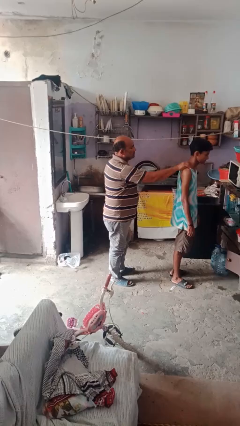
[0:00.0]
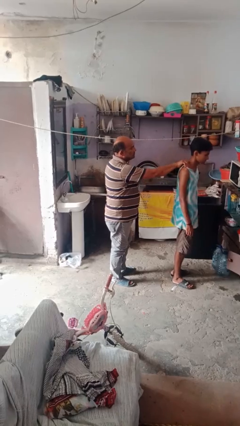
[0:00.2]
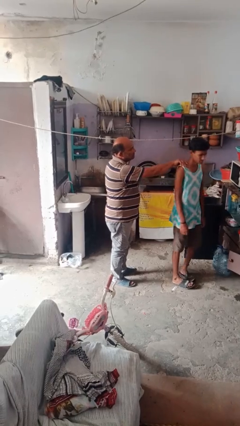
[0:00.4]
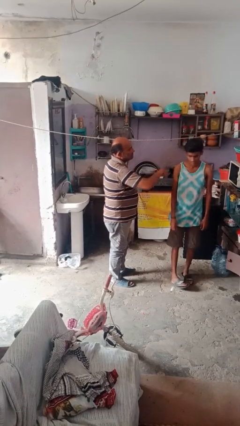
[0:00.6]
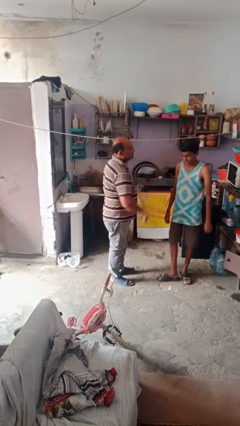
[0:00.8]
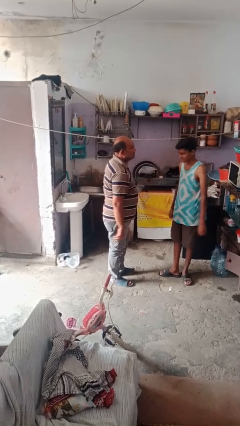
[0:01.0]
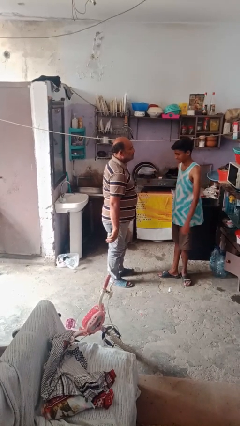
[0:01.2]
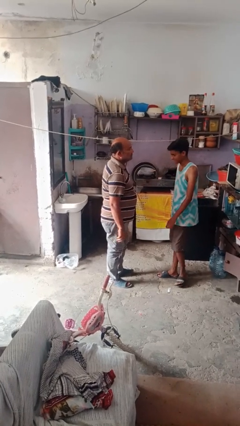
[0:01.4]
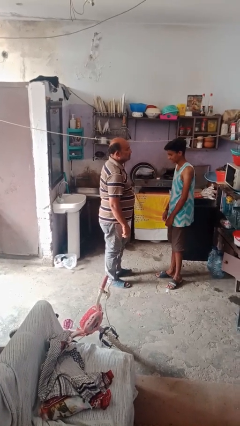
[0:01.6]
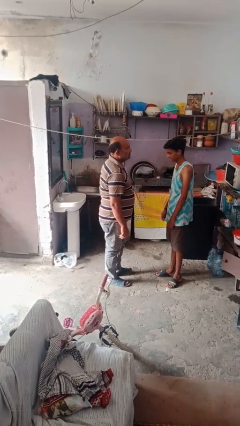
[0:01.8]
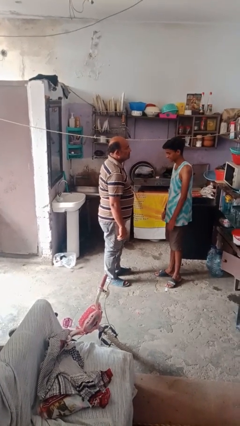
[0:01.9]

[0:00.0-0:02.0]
person spins person around

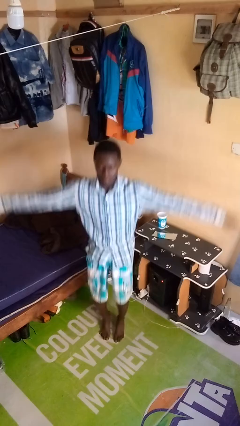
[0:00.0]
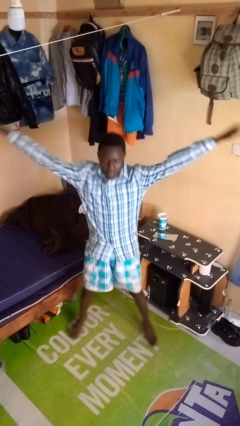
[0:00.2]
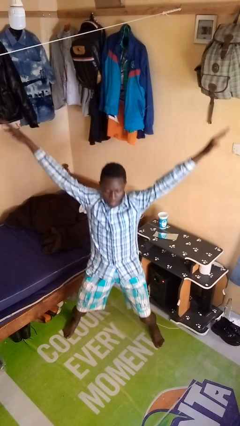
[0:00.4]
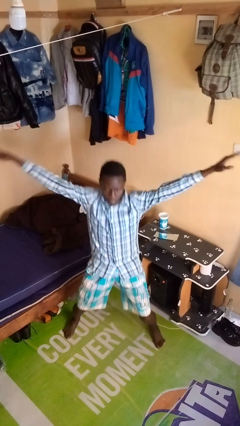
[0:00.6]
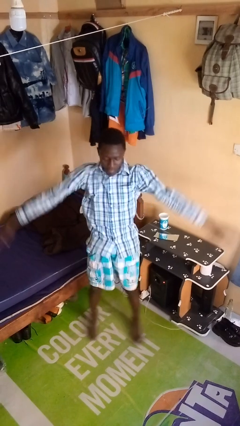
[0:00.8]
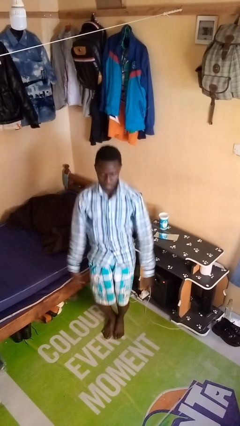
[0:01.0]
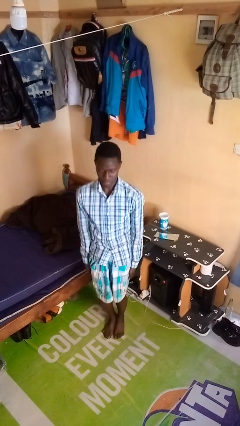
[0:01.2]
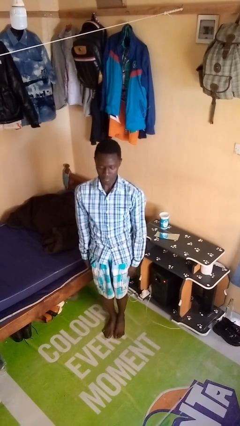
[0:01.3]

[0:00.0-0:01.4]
person exercises with jumping jacks

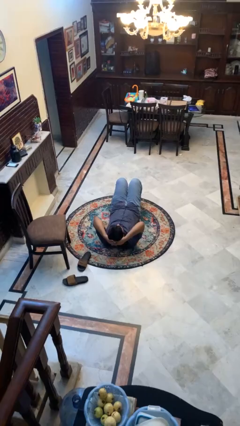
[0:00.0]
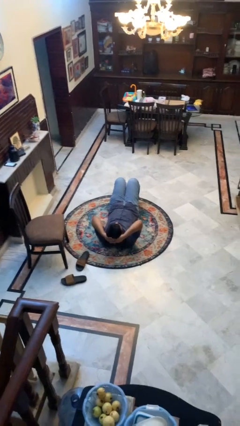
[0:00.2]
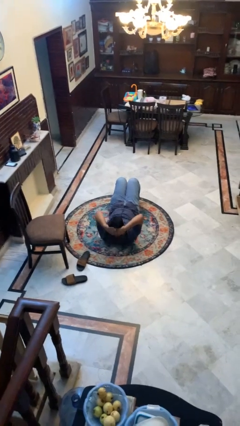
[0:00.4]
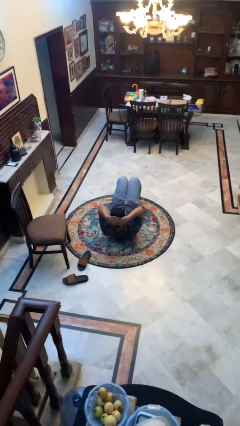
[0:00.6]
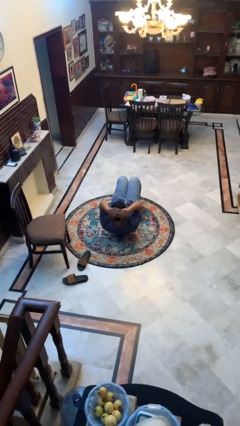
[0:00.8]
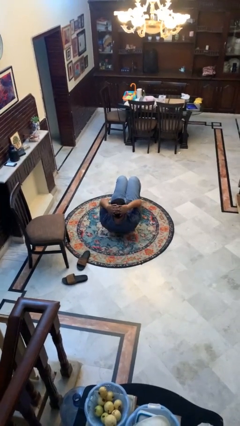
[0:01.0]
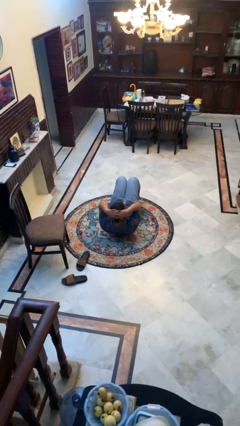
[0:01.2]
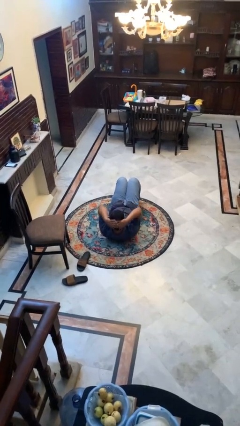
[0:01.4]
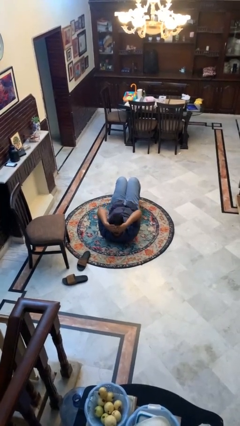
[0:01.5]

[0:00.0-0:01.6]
person exercises with situp

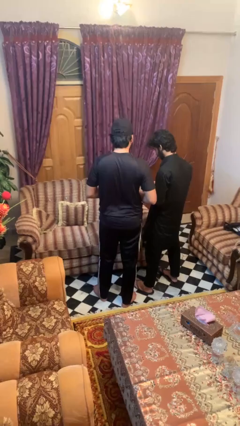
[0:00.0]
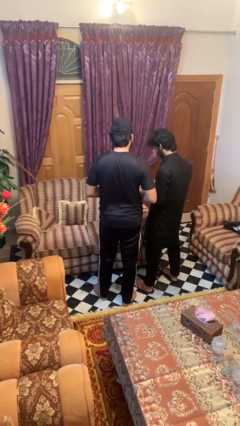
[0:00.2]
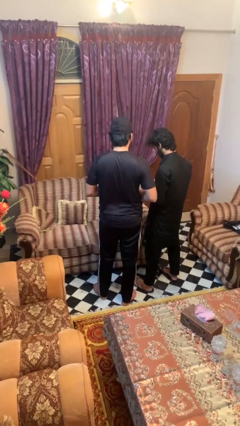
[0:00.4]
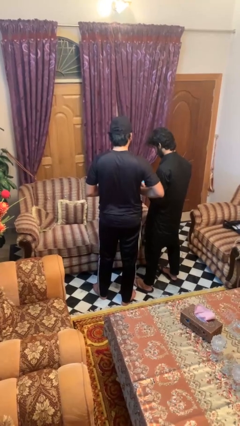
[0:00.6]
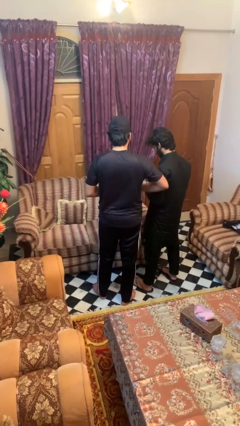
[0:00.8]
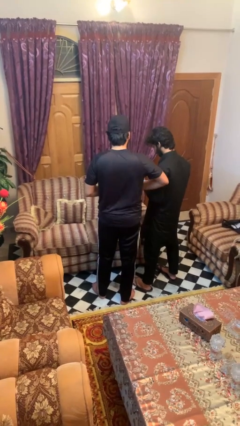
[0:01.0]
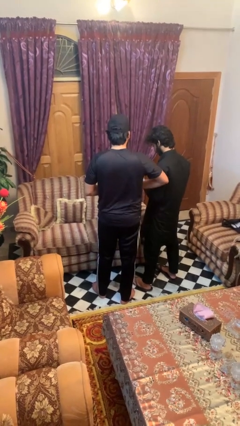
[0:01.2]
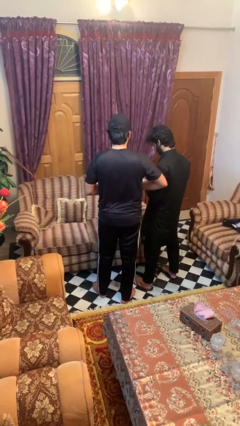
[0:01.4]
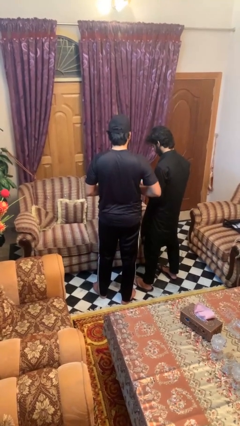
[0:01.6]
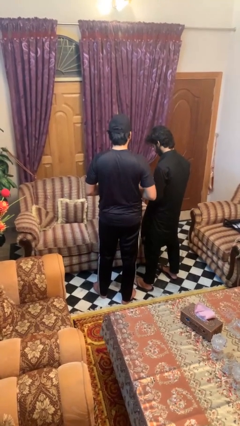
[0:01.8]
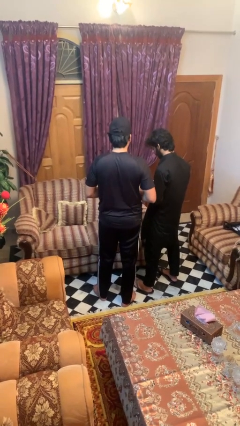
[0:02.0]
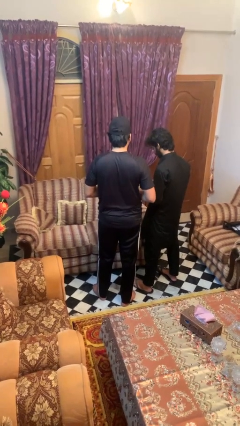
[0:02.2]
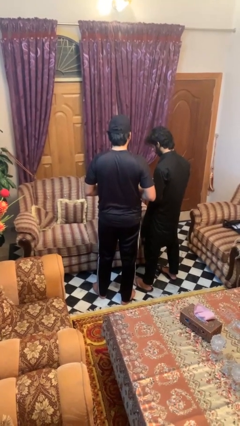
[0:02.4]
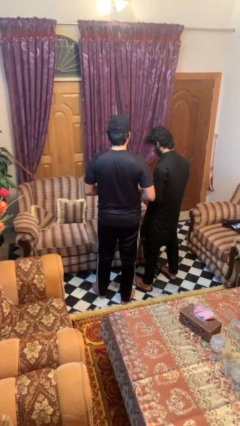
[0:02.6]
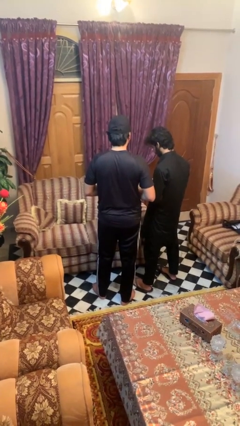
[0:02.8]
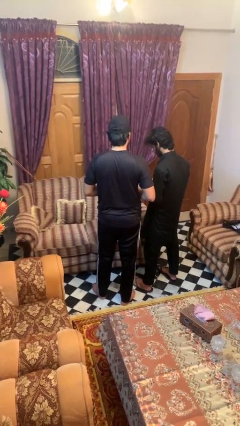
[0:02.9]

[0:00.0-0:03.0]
person nudges person with elbow

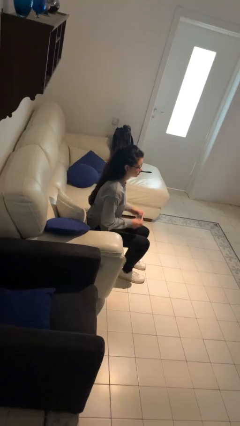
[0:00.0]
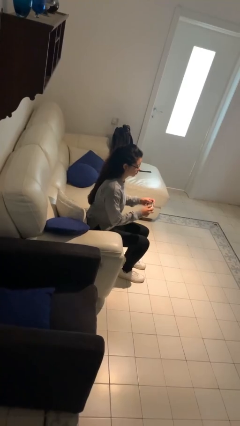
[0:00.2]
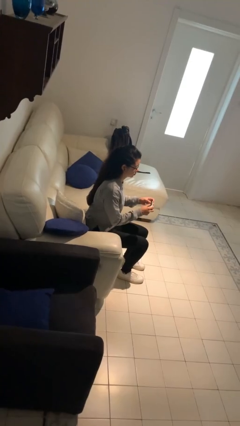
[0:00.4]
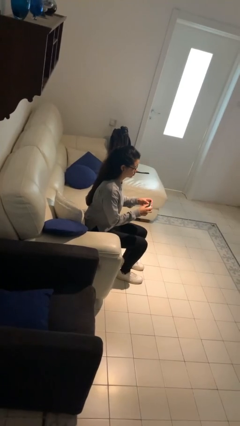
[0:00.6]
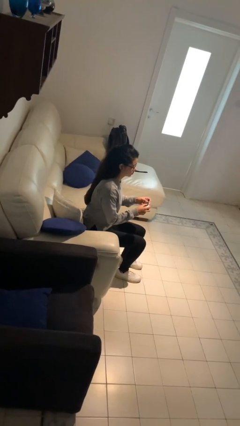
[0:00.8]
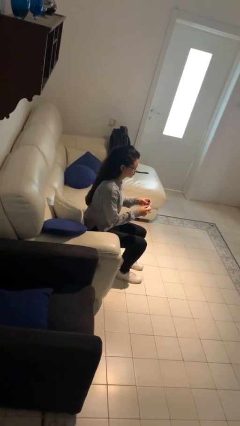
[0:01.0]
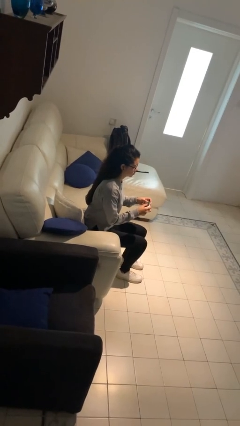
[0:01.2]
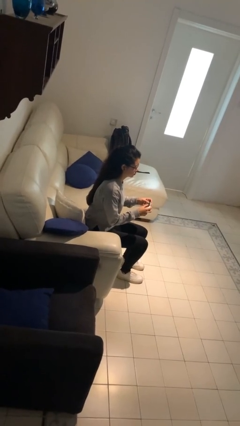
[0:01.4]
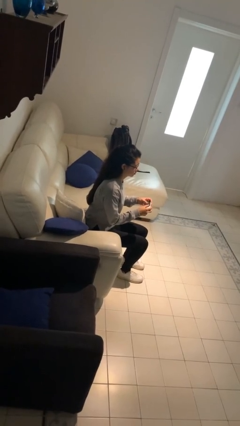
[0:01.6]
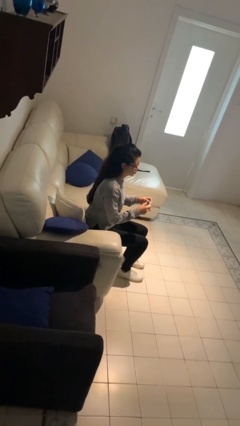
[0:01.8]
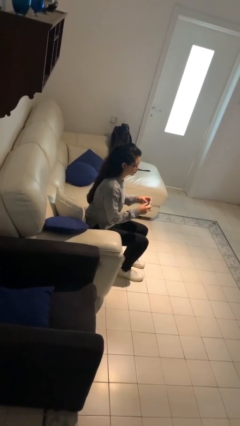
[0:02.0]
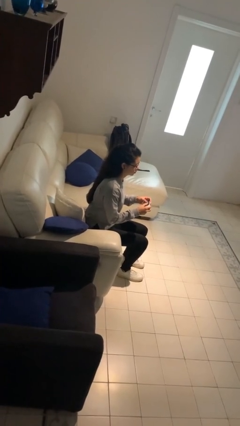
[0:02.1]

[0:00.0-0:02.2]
person interacts with handheld game

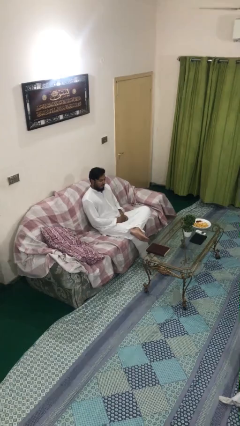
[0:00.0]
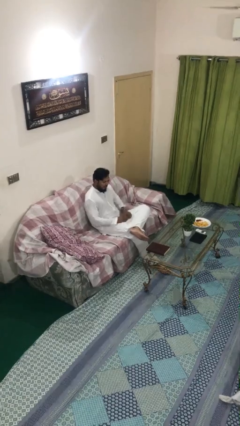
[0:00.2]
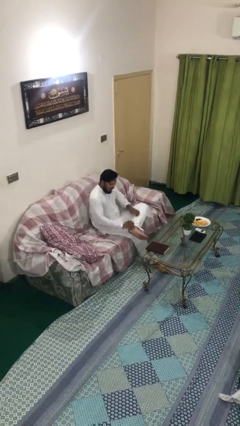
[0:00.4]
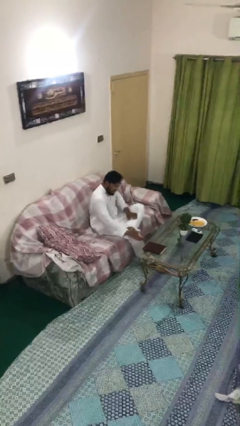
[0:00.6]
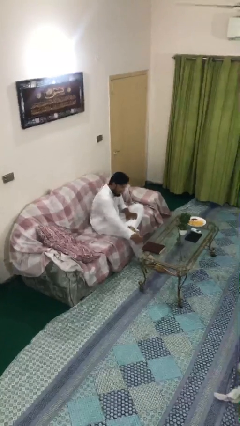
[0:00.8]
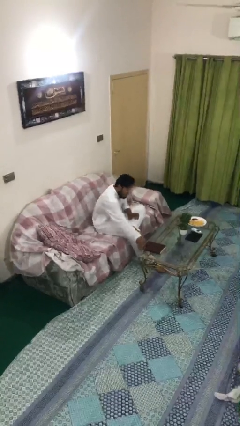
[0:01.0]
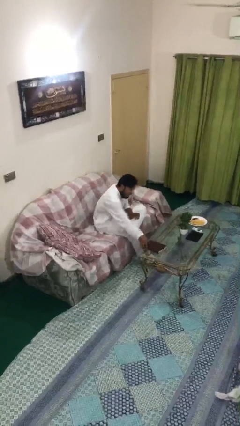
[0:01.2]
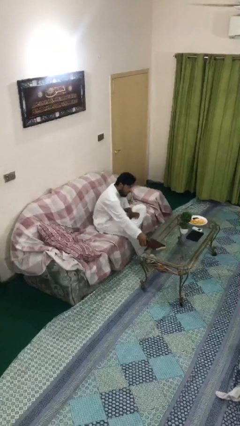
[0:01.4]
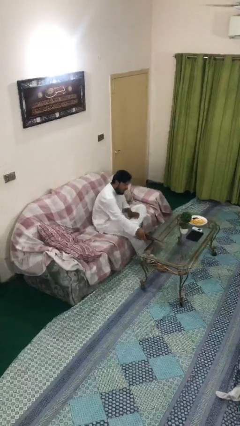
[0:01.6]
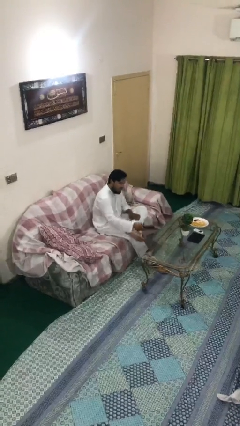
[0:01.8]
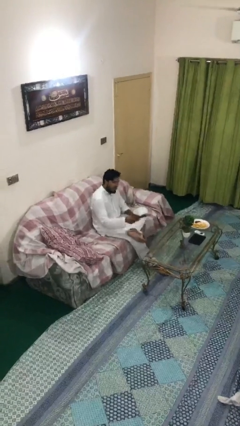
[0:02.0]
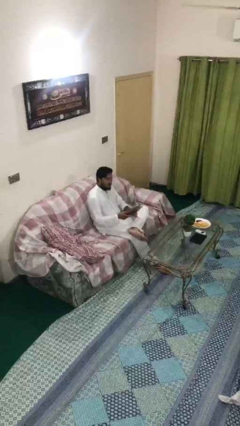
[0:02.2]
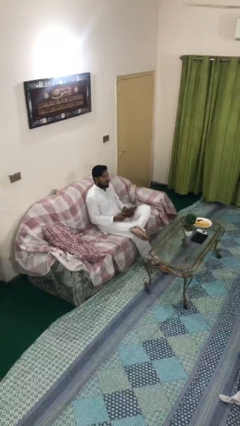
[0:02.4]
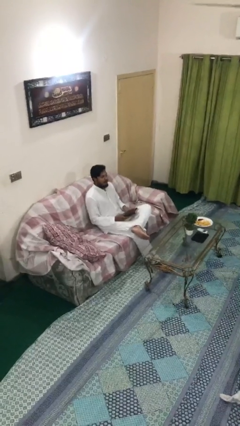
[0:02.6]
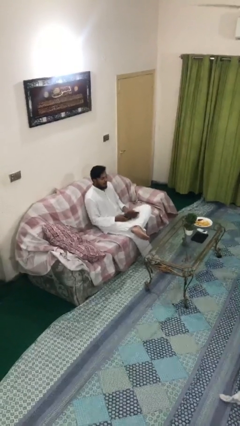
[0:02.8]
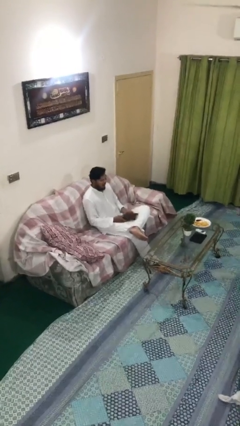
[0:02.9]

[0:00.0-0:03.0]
person picks up object from table

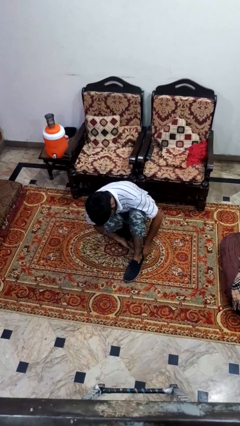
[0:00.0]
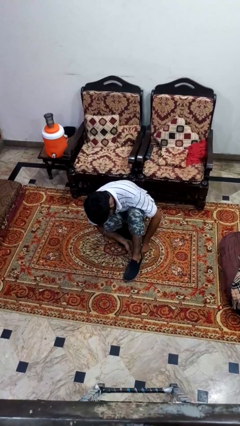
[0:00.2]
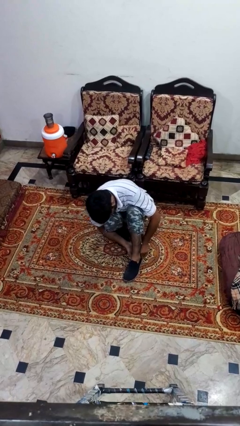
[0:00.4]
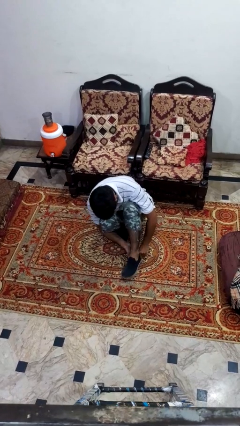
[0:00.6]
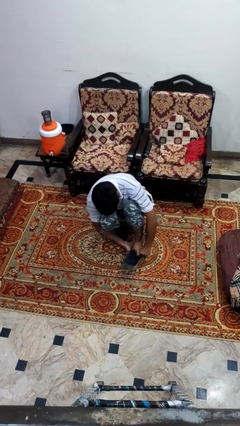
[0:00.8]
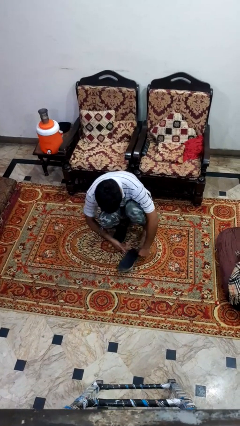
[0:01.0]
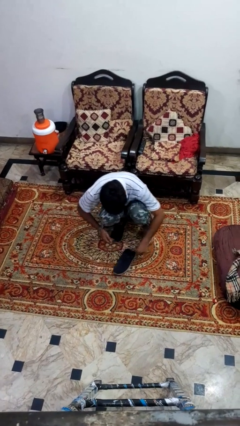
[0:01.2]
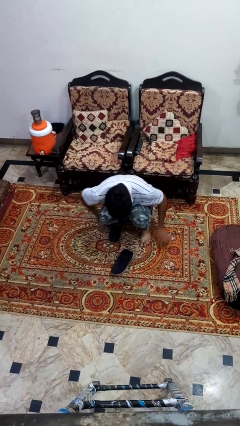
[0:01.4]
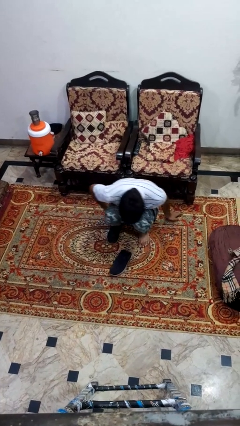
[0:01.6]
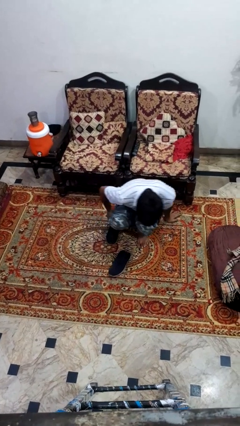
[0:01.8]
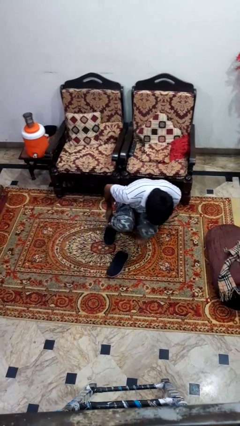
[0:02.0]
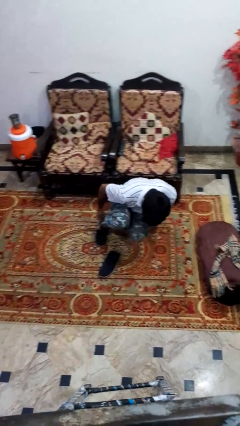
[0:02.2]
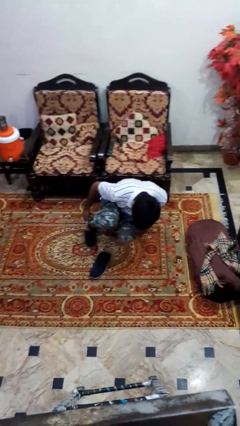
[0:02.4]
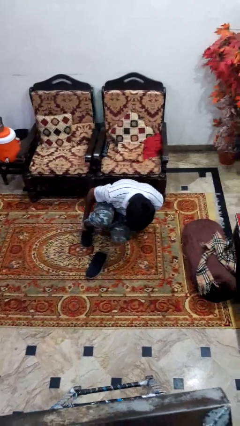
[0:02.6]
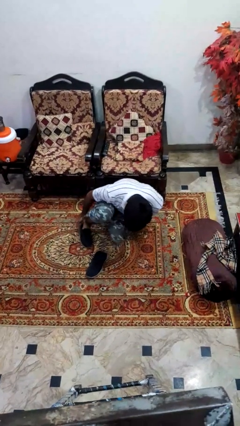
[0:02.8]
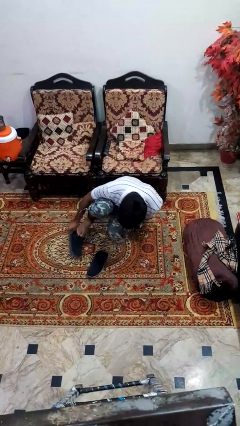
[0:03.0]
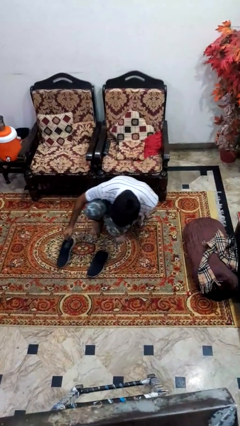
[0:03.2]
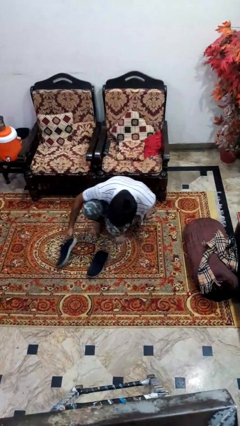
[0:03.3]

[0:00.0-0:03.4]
person takes off shoes

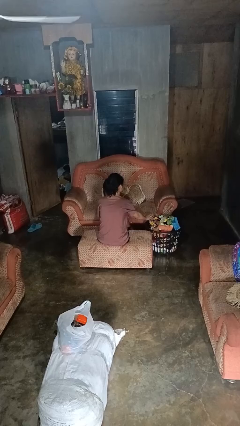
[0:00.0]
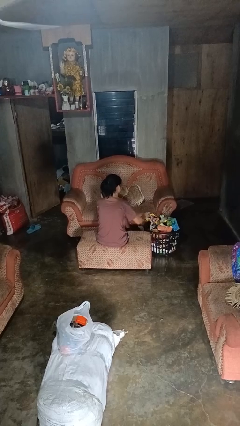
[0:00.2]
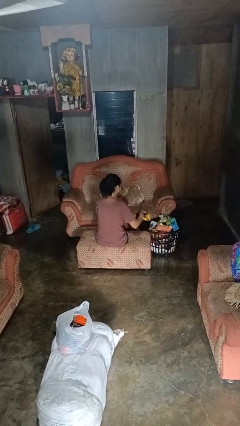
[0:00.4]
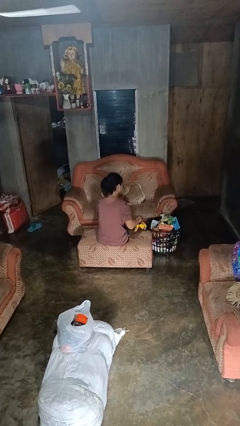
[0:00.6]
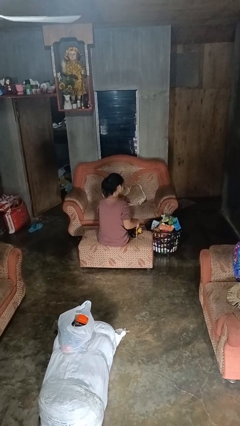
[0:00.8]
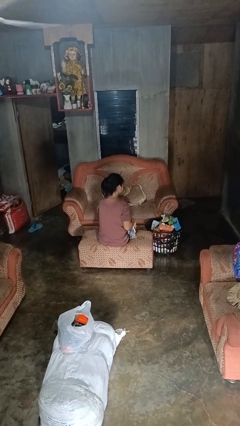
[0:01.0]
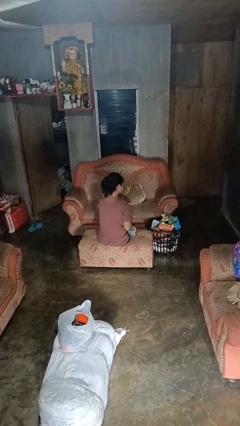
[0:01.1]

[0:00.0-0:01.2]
person takes object from basket
